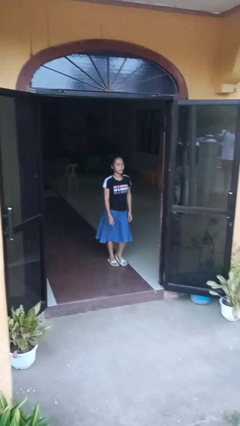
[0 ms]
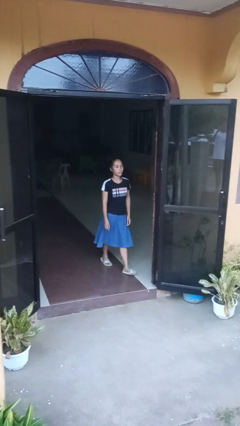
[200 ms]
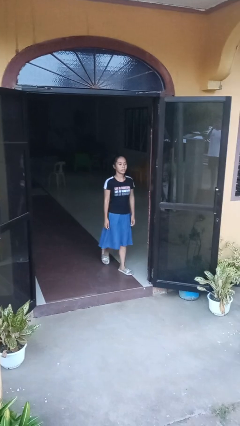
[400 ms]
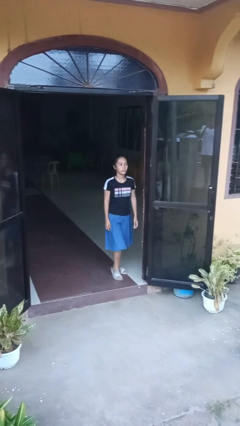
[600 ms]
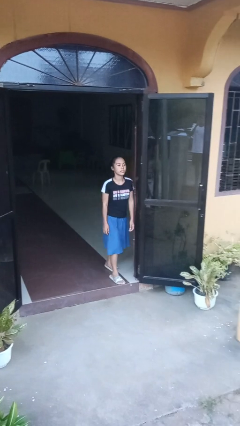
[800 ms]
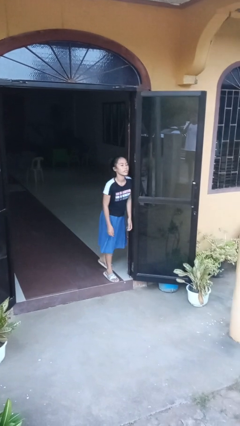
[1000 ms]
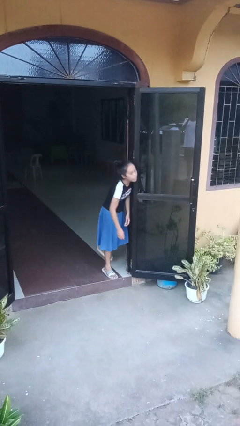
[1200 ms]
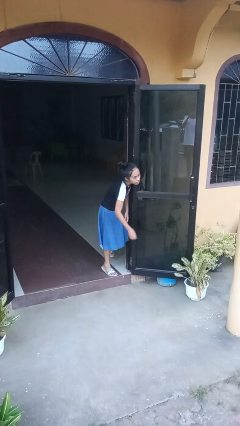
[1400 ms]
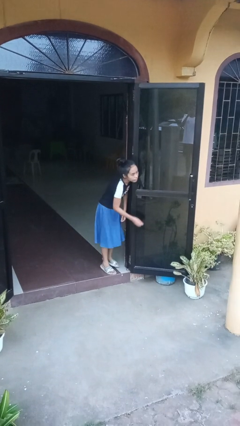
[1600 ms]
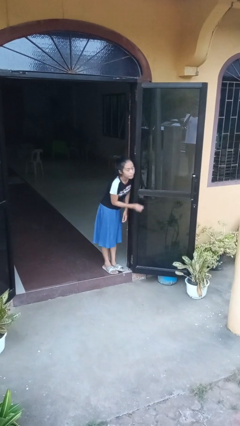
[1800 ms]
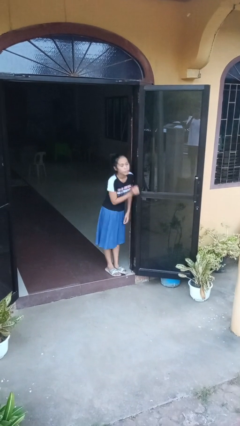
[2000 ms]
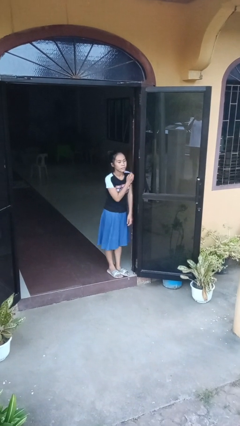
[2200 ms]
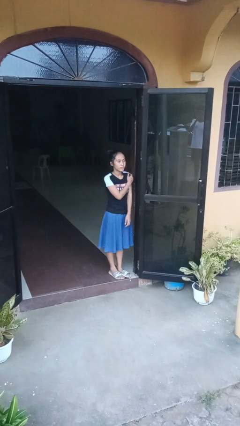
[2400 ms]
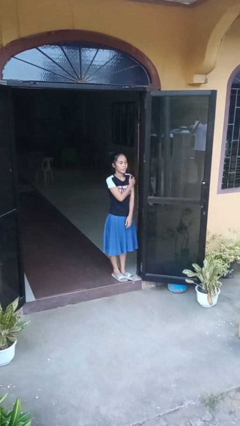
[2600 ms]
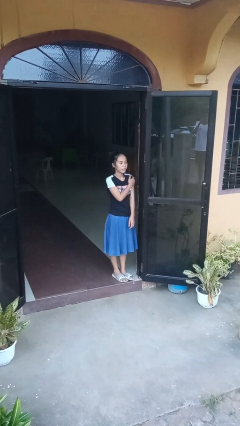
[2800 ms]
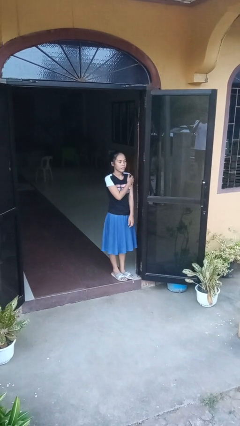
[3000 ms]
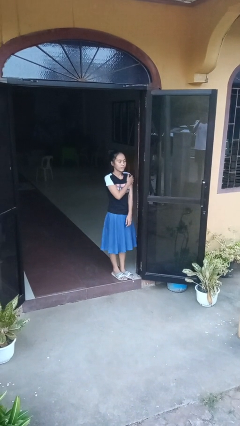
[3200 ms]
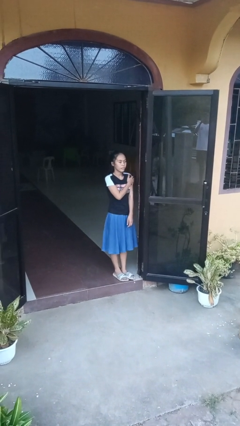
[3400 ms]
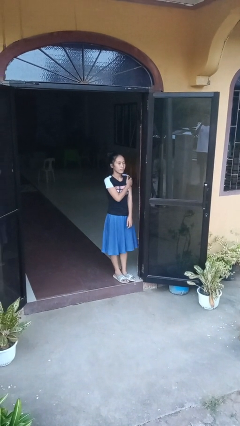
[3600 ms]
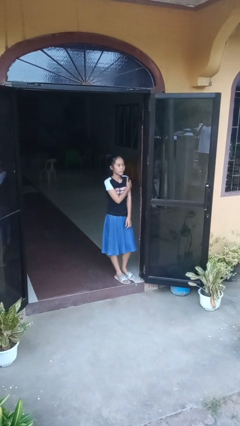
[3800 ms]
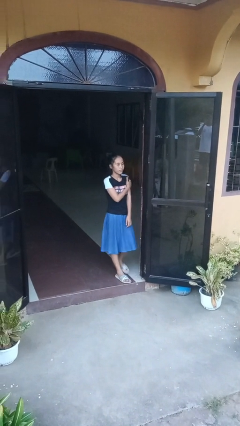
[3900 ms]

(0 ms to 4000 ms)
person bumps into wall

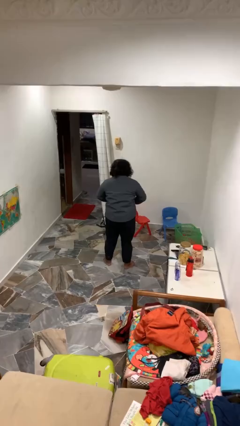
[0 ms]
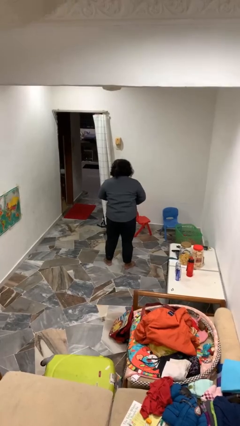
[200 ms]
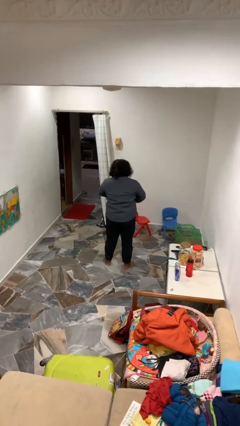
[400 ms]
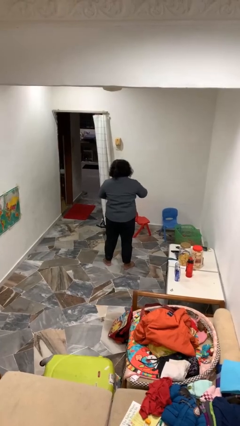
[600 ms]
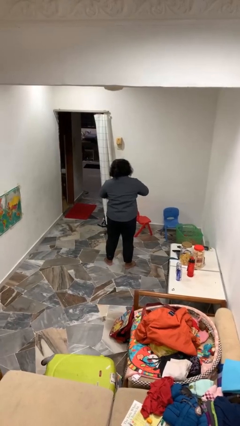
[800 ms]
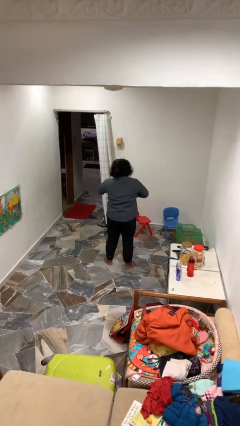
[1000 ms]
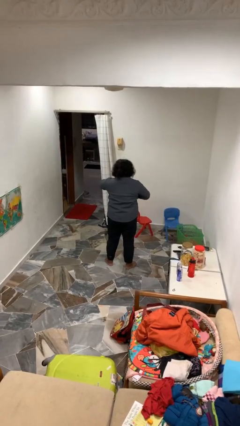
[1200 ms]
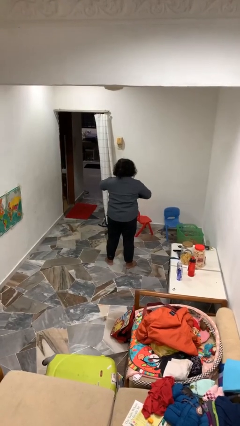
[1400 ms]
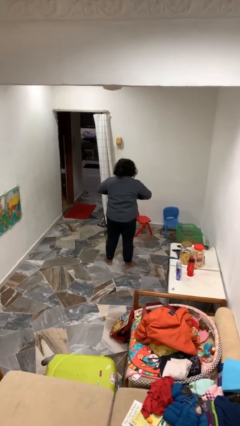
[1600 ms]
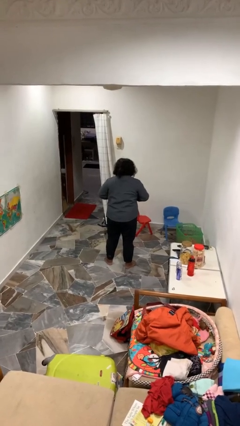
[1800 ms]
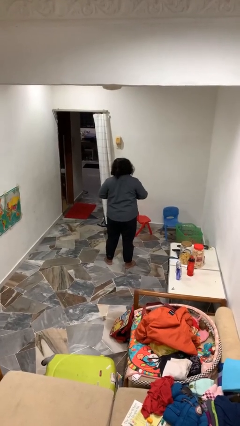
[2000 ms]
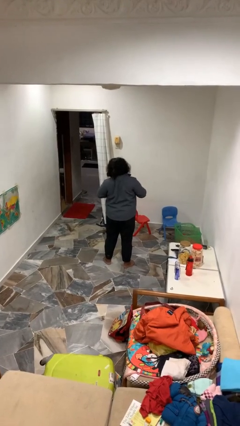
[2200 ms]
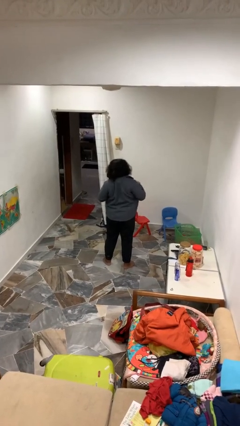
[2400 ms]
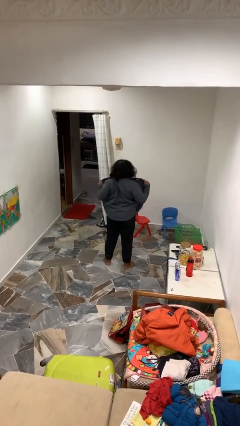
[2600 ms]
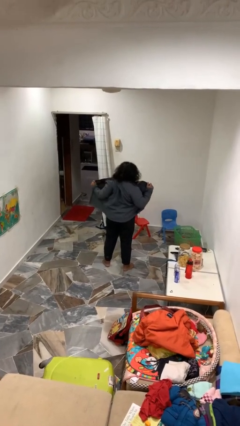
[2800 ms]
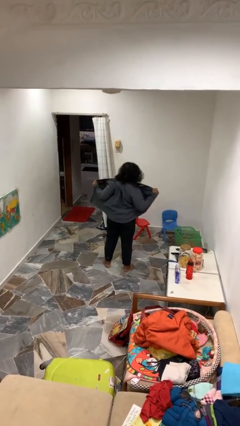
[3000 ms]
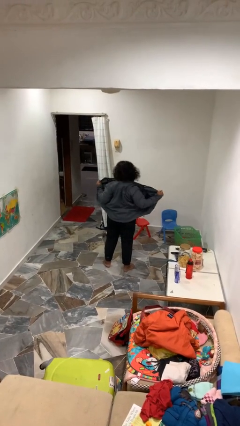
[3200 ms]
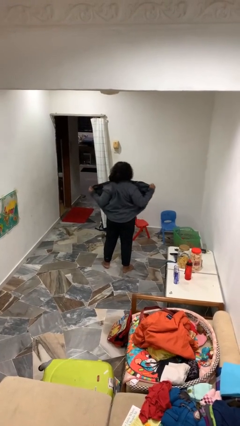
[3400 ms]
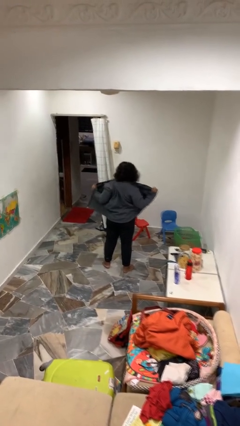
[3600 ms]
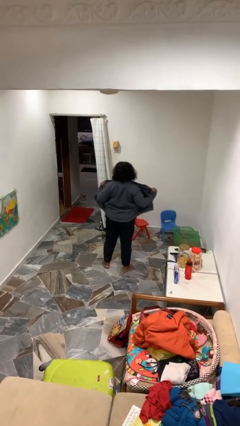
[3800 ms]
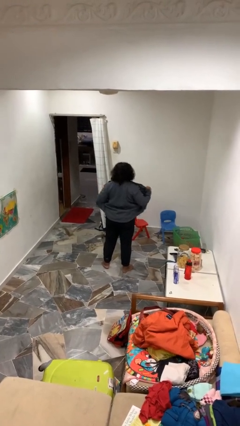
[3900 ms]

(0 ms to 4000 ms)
person unbuttons shirt

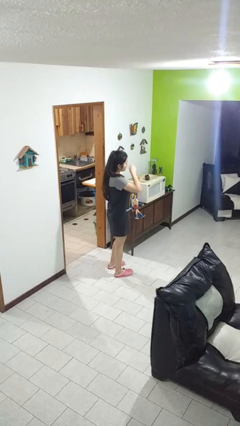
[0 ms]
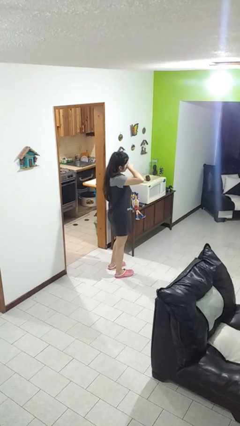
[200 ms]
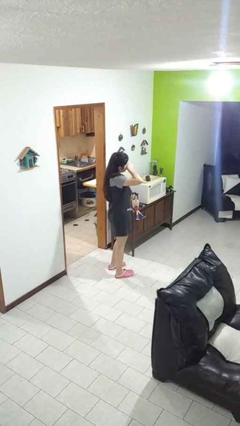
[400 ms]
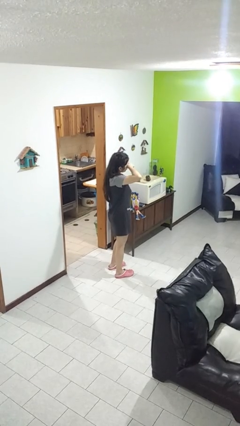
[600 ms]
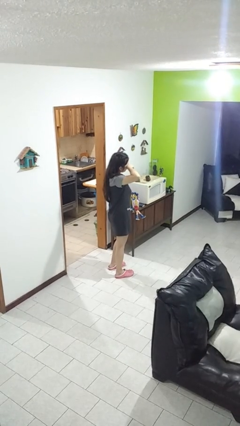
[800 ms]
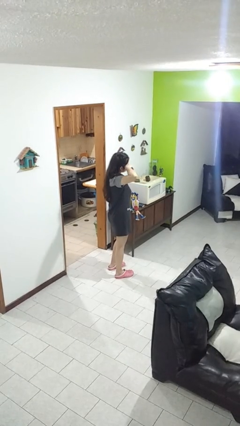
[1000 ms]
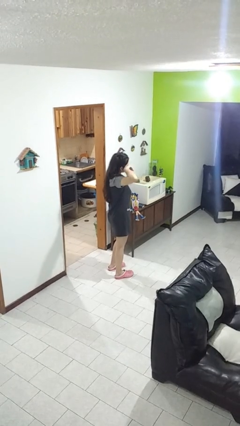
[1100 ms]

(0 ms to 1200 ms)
person rubs eyes

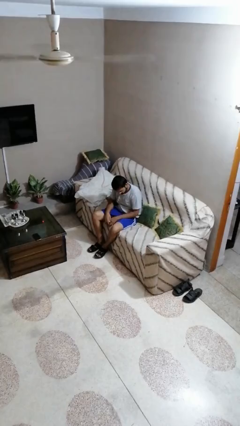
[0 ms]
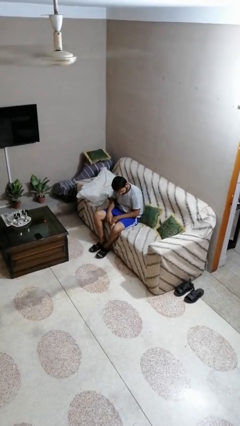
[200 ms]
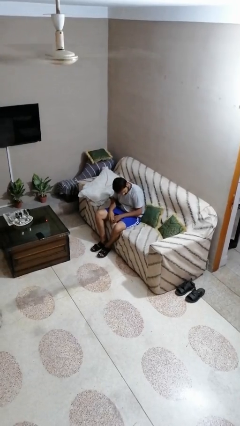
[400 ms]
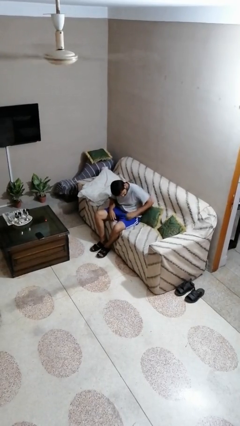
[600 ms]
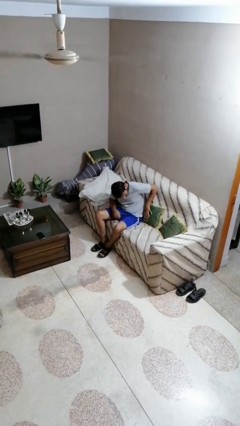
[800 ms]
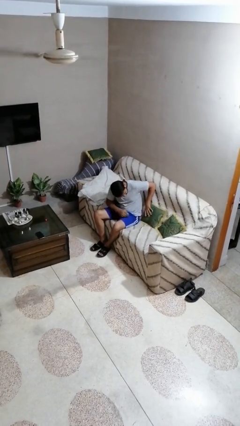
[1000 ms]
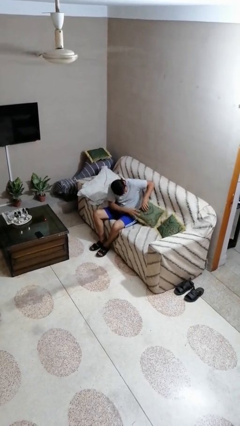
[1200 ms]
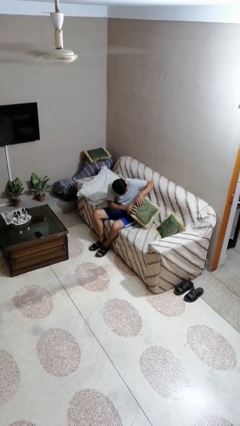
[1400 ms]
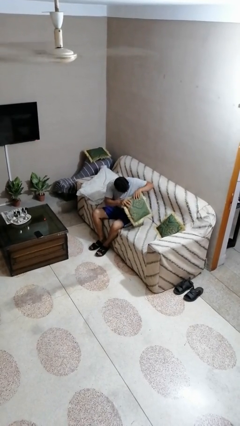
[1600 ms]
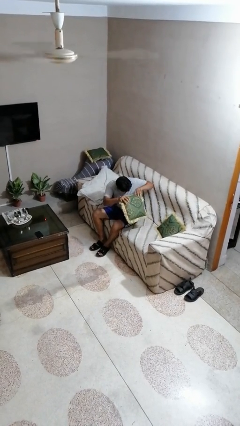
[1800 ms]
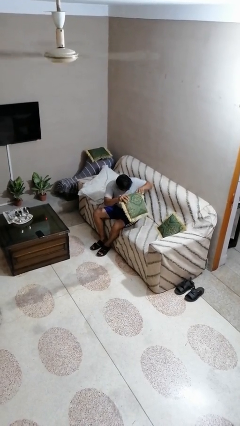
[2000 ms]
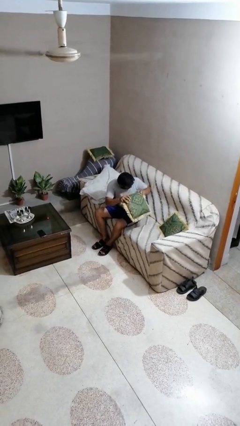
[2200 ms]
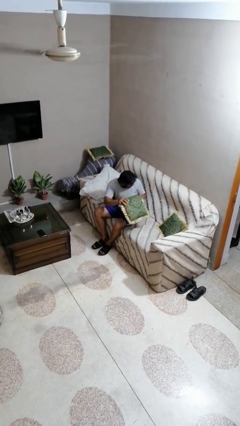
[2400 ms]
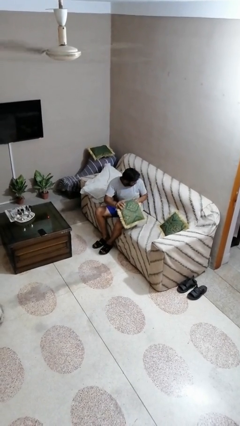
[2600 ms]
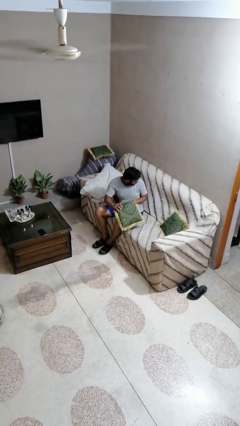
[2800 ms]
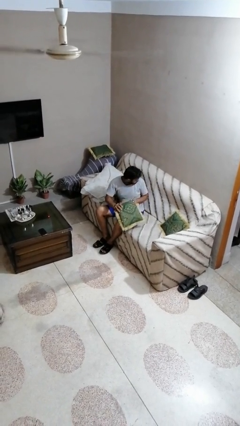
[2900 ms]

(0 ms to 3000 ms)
person searches in couch

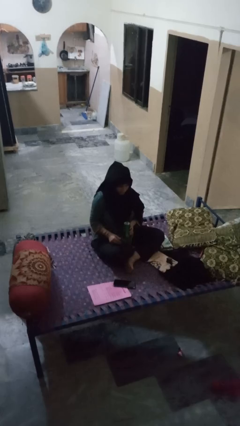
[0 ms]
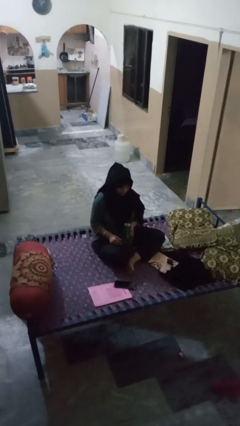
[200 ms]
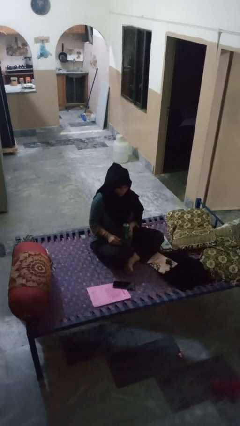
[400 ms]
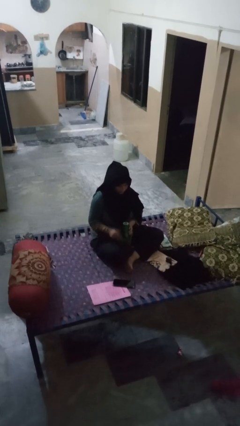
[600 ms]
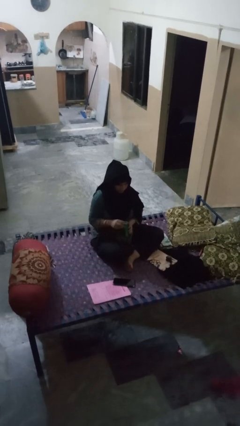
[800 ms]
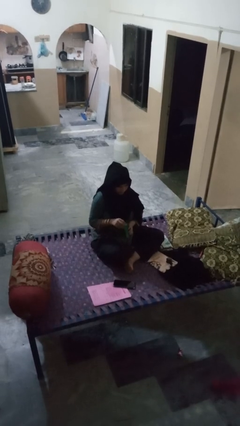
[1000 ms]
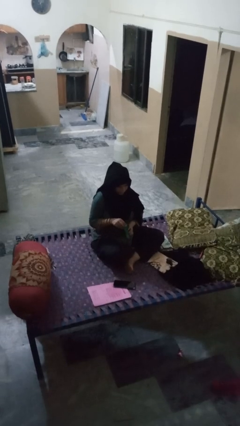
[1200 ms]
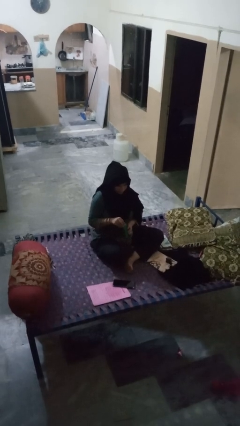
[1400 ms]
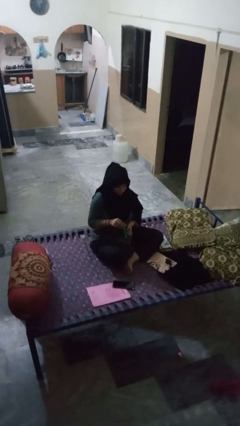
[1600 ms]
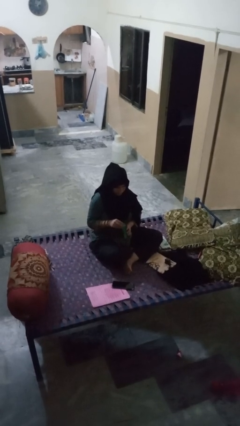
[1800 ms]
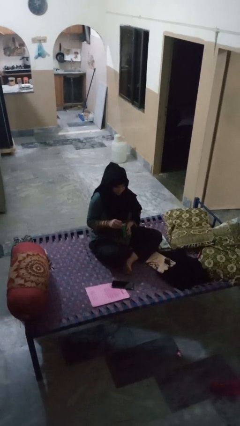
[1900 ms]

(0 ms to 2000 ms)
person opens can with can opener

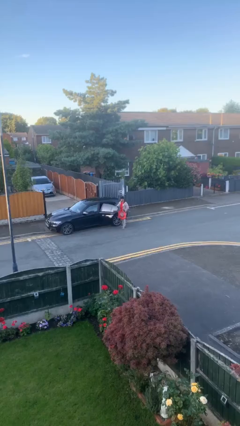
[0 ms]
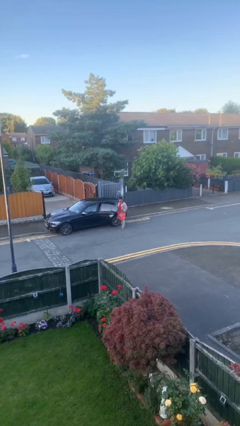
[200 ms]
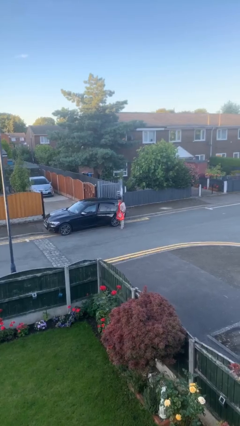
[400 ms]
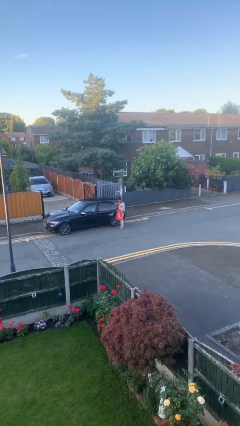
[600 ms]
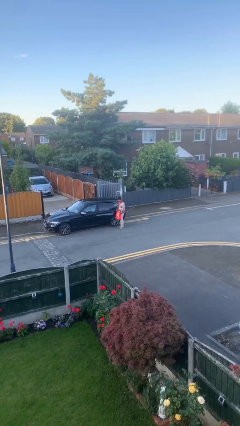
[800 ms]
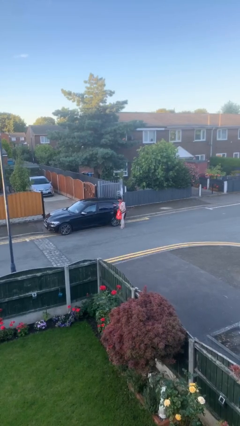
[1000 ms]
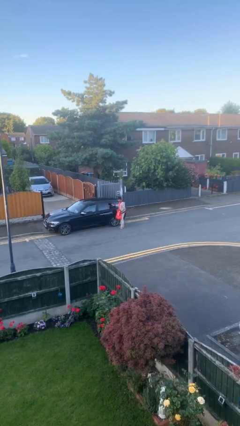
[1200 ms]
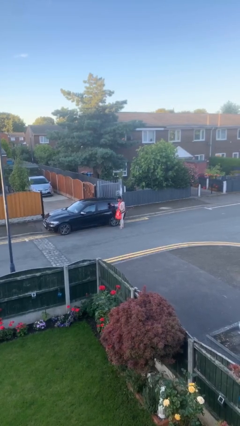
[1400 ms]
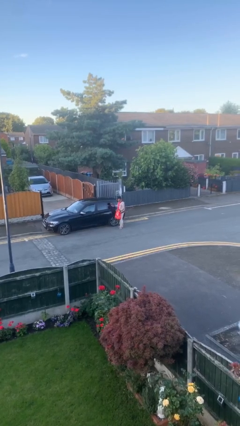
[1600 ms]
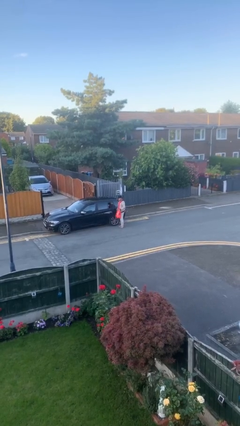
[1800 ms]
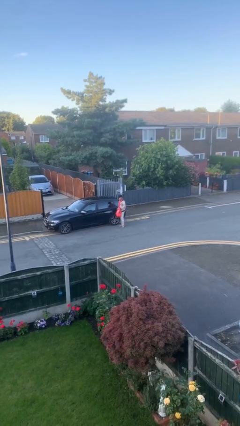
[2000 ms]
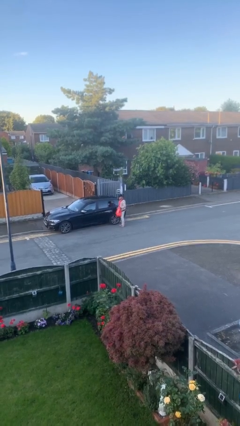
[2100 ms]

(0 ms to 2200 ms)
person closes car door

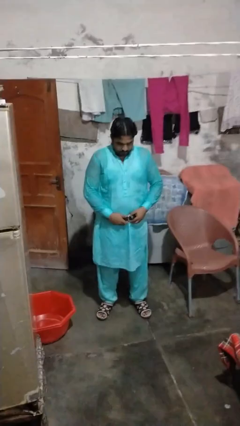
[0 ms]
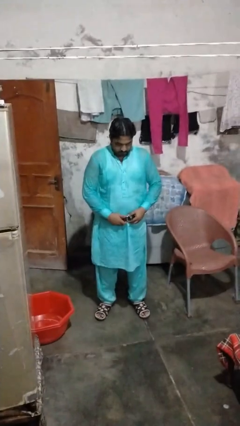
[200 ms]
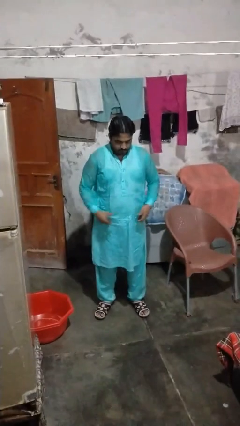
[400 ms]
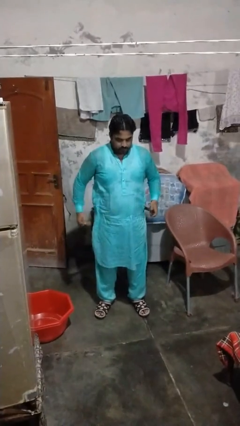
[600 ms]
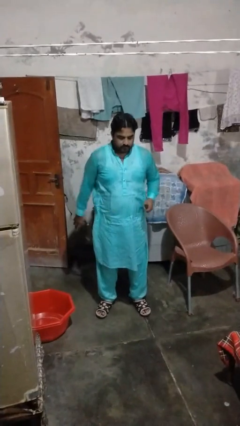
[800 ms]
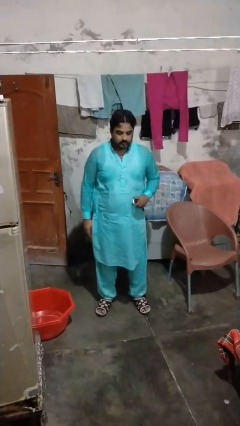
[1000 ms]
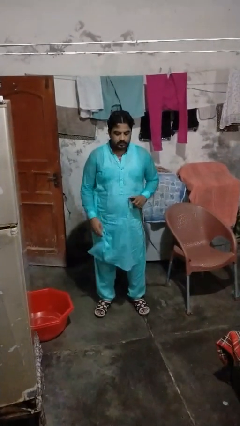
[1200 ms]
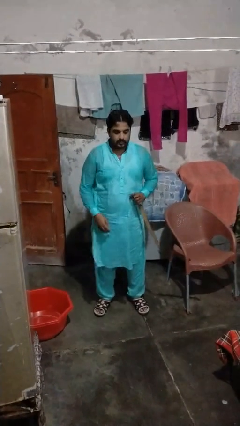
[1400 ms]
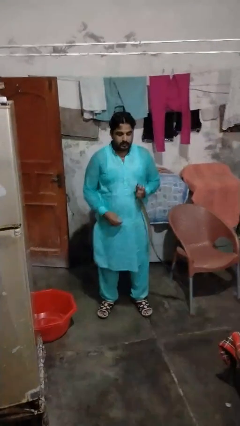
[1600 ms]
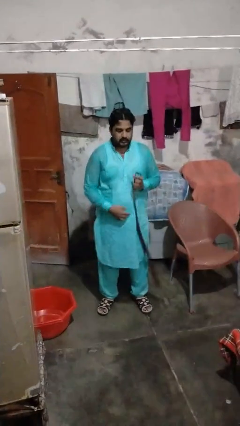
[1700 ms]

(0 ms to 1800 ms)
person takes off belt
